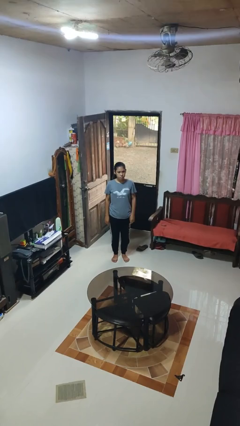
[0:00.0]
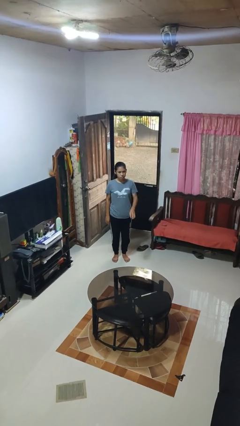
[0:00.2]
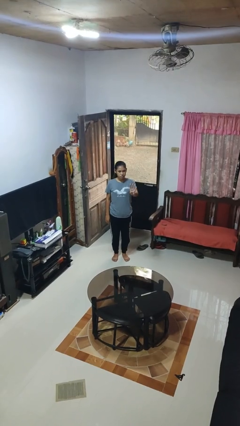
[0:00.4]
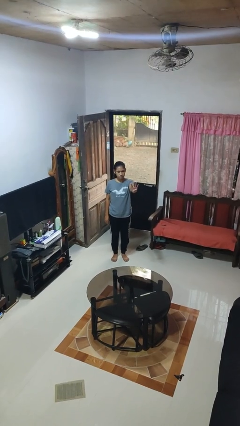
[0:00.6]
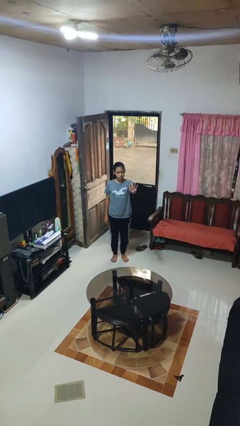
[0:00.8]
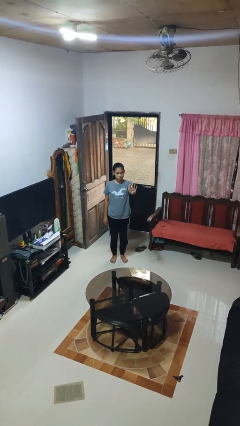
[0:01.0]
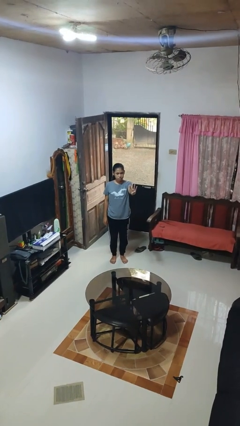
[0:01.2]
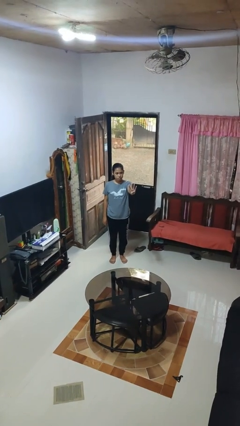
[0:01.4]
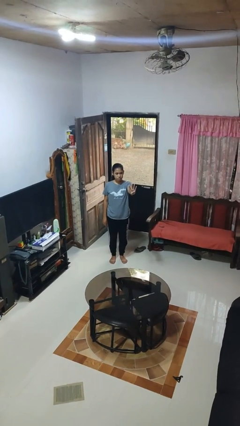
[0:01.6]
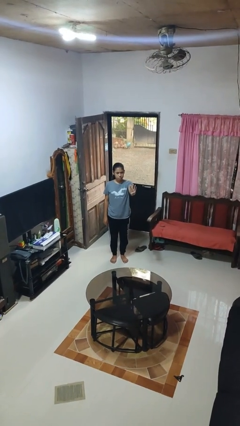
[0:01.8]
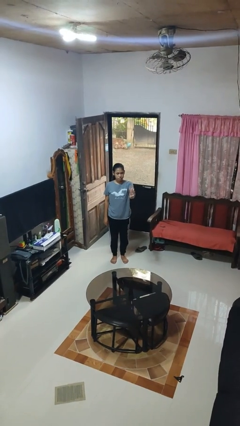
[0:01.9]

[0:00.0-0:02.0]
person gestures number four

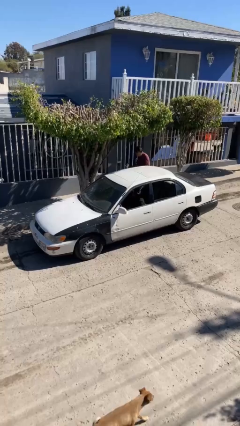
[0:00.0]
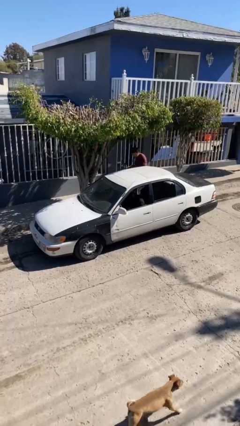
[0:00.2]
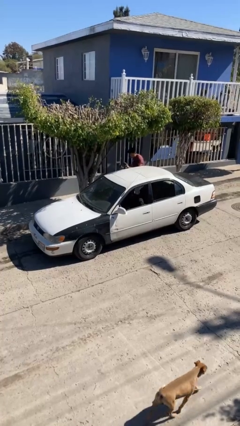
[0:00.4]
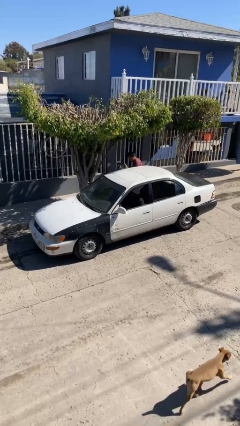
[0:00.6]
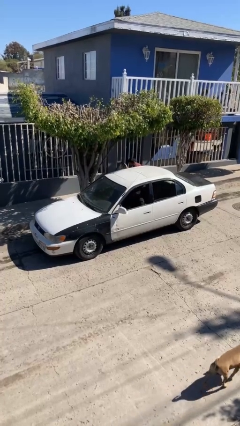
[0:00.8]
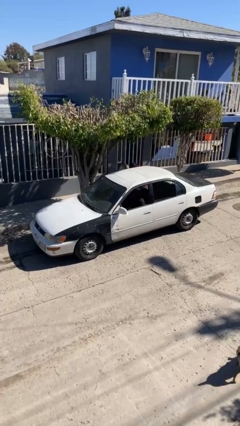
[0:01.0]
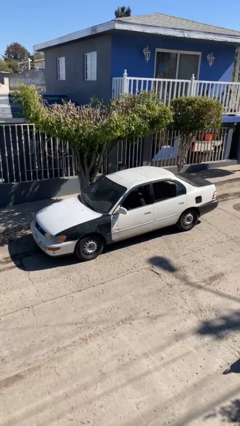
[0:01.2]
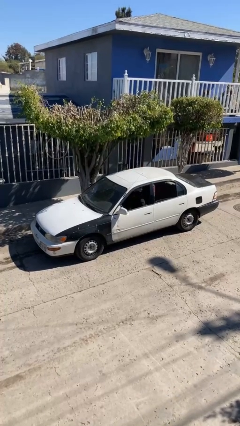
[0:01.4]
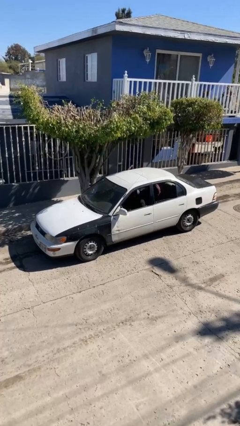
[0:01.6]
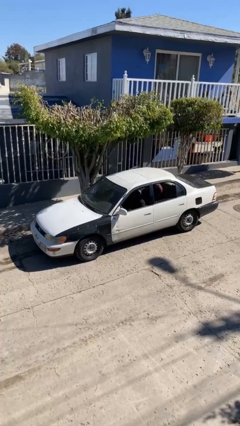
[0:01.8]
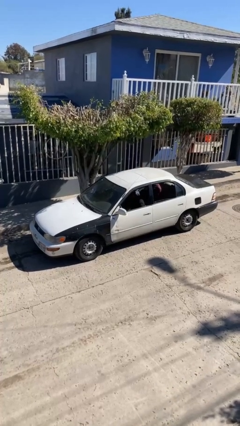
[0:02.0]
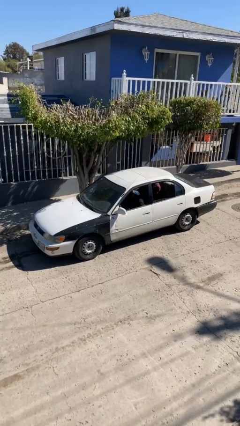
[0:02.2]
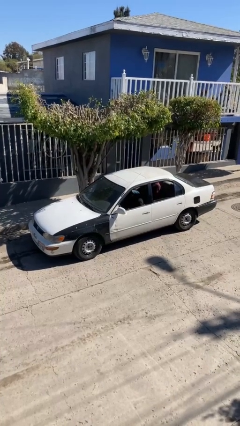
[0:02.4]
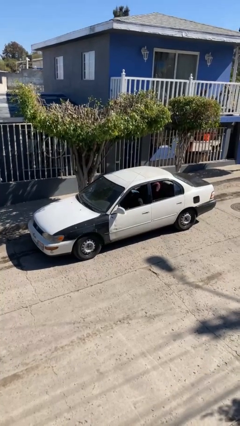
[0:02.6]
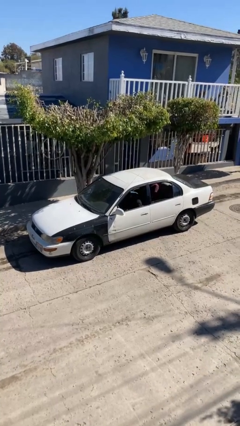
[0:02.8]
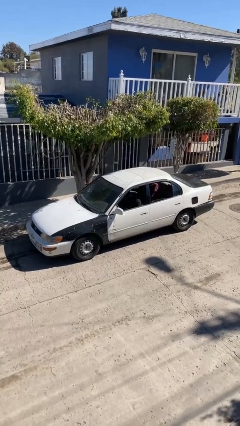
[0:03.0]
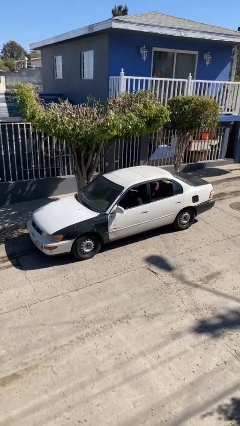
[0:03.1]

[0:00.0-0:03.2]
car picks up person

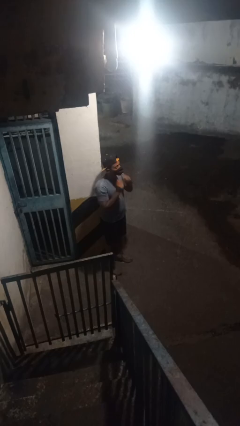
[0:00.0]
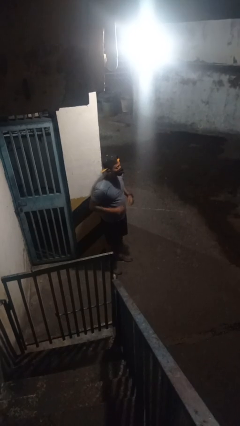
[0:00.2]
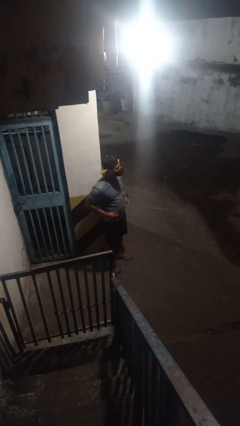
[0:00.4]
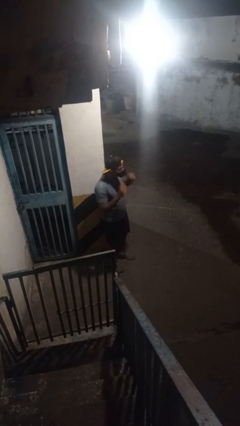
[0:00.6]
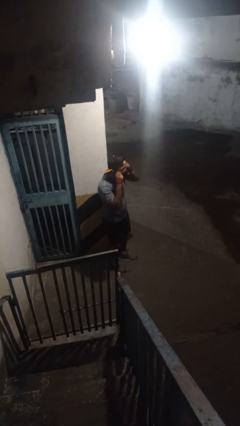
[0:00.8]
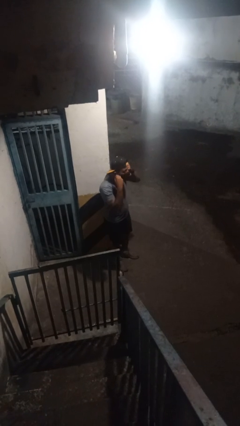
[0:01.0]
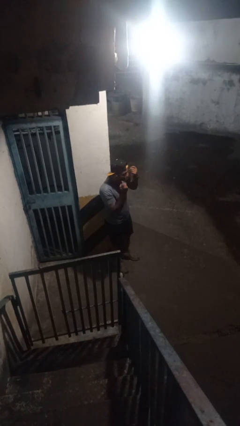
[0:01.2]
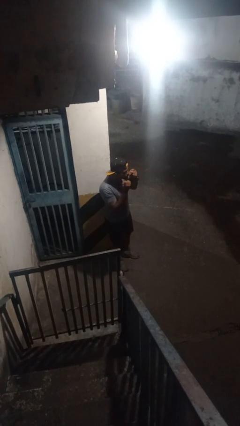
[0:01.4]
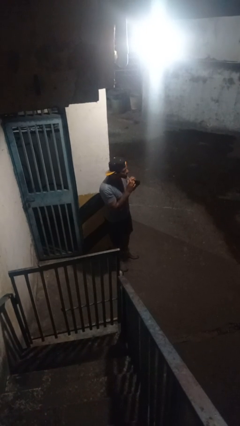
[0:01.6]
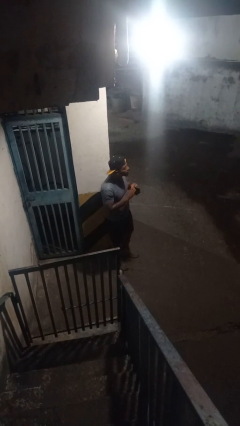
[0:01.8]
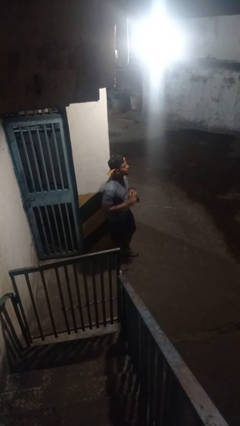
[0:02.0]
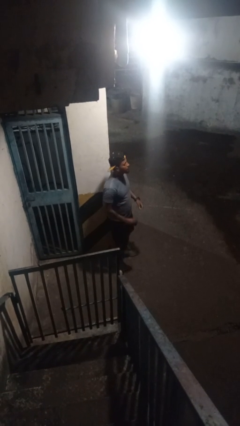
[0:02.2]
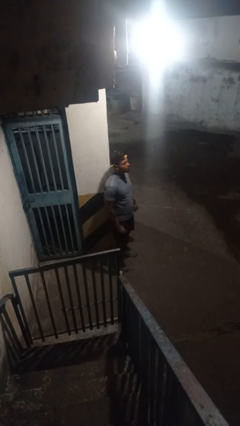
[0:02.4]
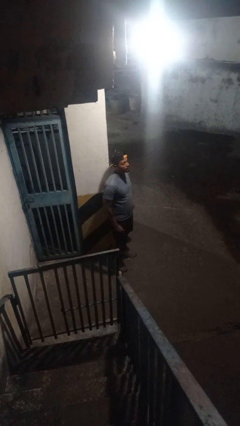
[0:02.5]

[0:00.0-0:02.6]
person takes off facemask

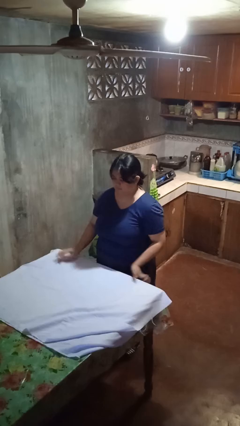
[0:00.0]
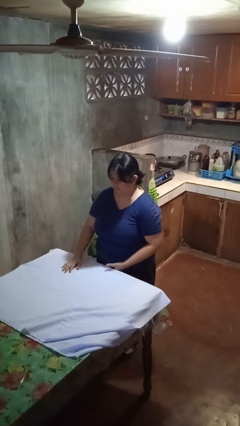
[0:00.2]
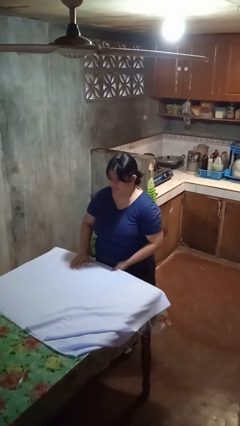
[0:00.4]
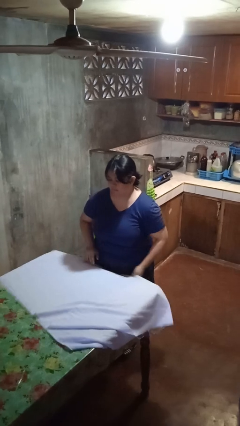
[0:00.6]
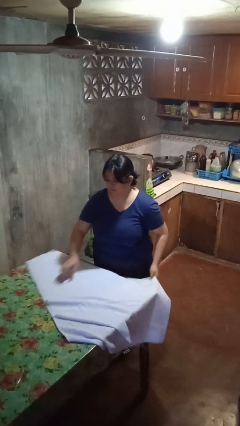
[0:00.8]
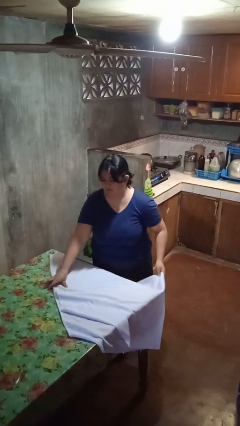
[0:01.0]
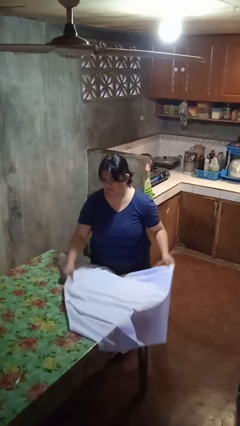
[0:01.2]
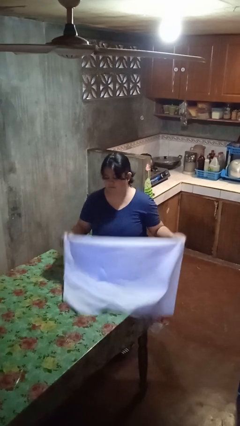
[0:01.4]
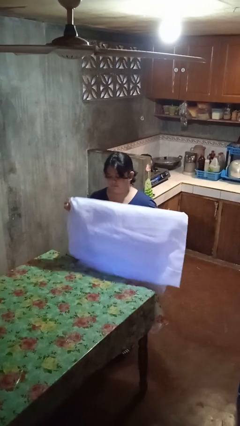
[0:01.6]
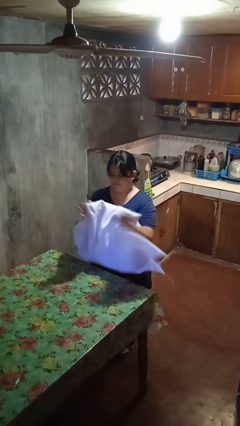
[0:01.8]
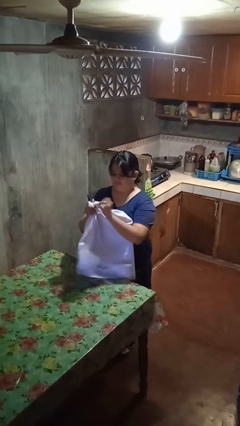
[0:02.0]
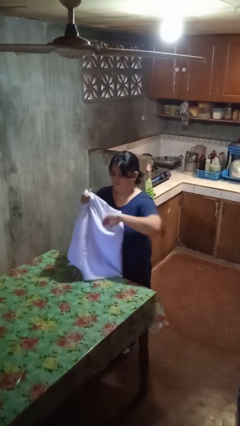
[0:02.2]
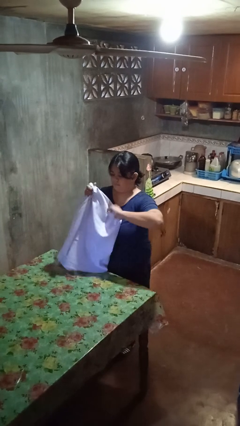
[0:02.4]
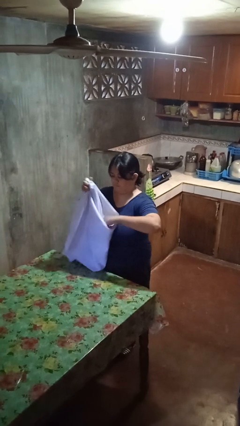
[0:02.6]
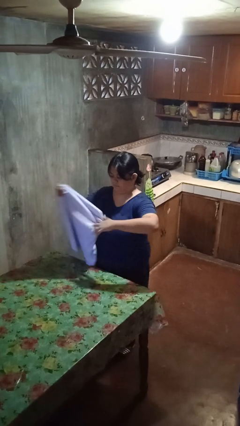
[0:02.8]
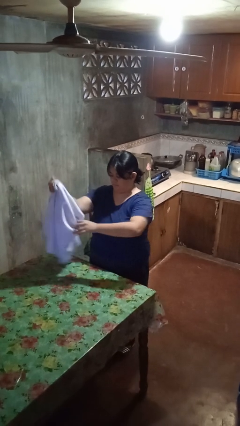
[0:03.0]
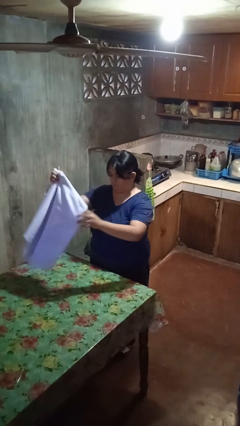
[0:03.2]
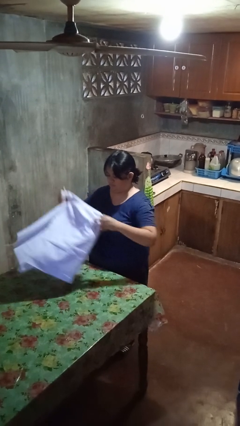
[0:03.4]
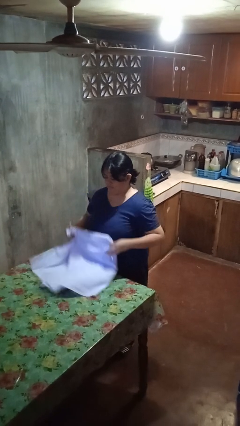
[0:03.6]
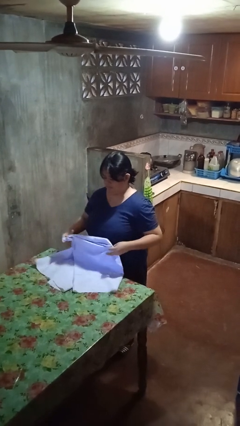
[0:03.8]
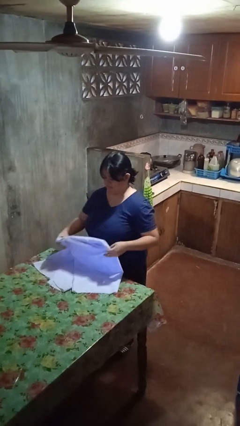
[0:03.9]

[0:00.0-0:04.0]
person folds tablecloth

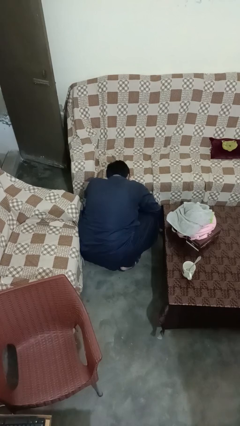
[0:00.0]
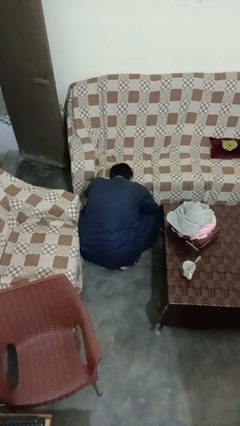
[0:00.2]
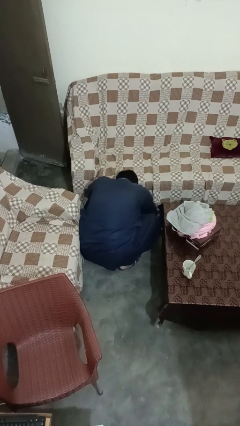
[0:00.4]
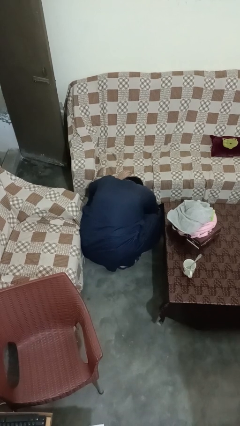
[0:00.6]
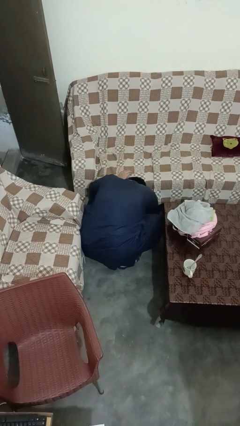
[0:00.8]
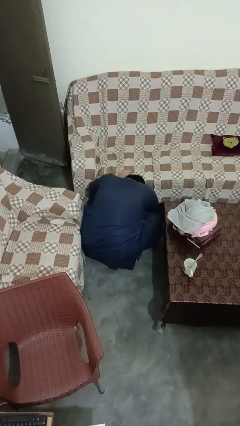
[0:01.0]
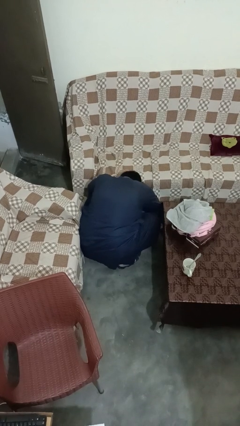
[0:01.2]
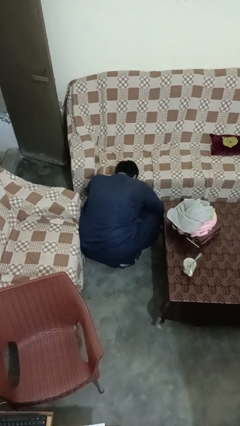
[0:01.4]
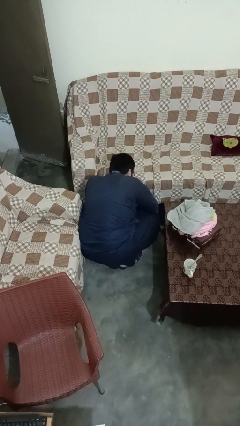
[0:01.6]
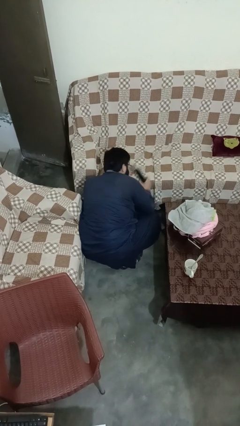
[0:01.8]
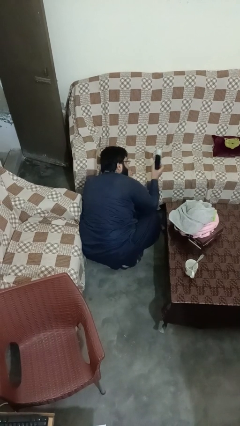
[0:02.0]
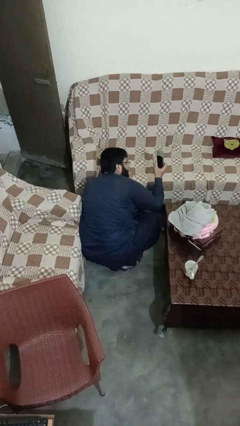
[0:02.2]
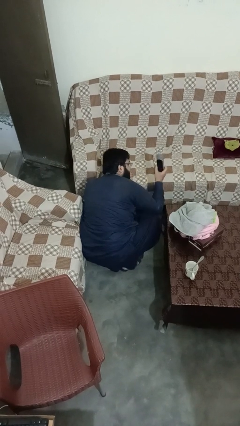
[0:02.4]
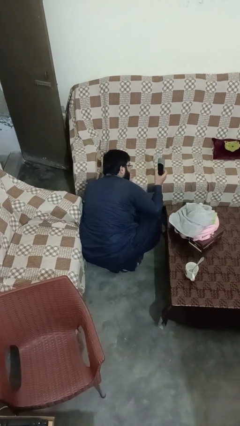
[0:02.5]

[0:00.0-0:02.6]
person searches under couch

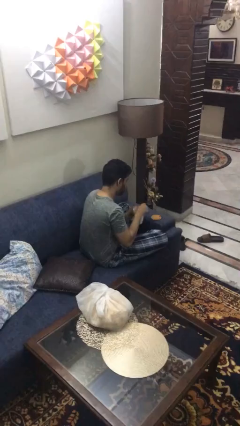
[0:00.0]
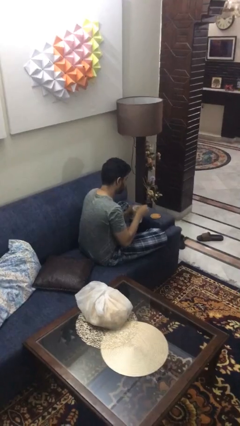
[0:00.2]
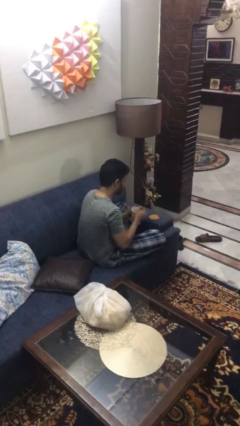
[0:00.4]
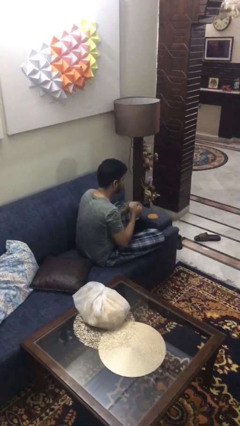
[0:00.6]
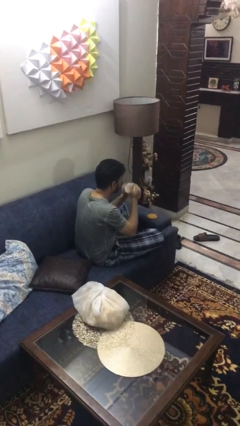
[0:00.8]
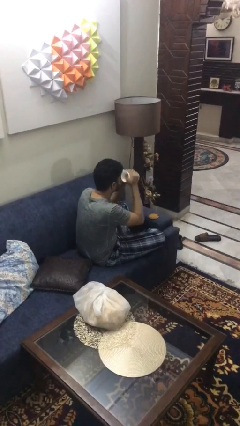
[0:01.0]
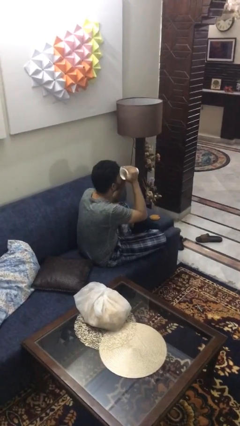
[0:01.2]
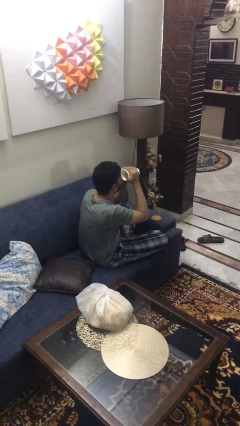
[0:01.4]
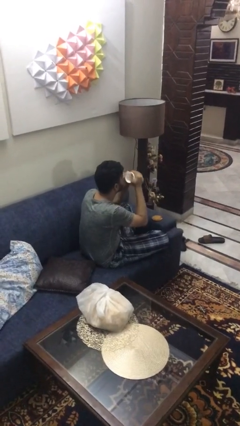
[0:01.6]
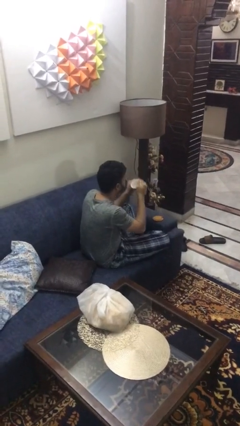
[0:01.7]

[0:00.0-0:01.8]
person drinks from mug

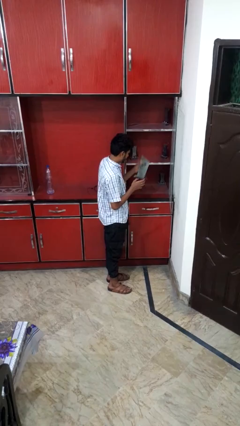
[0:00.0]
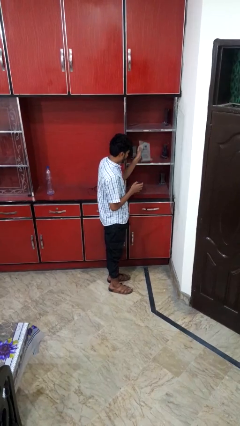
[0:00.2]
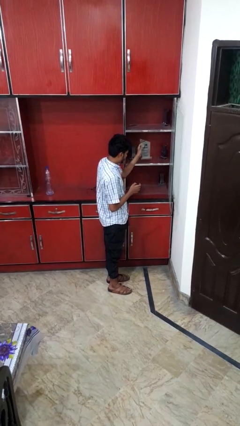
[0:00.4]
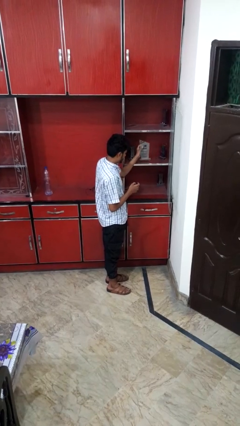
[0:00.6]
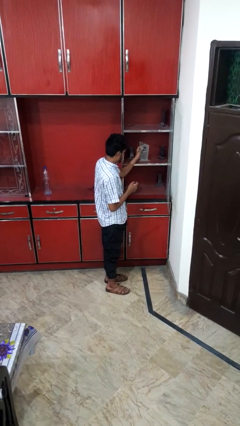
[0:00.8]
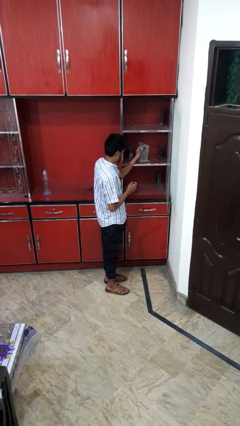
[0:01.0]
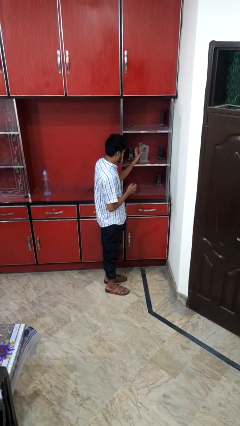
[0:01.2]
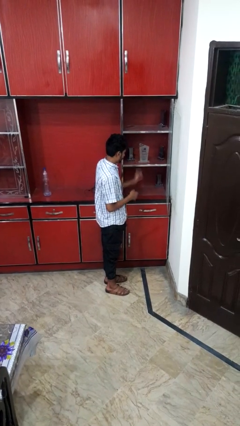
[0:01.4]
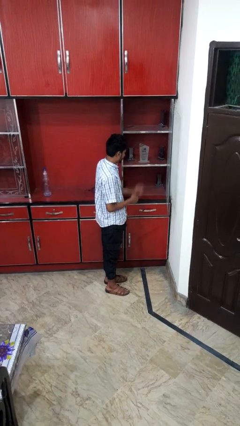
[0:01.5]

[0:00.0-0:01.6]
person puts down object into cabinet
